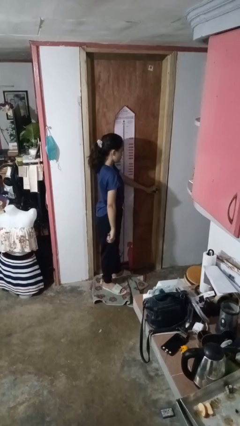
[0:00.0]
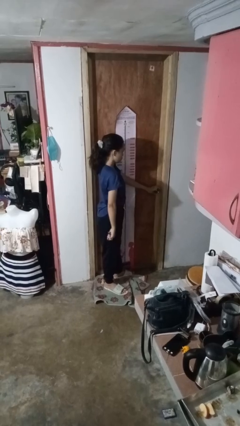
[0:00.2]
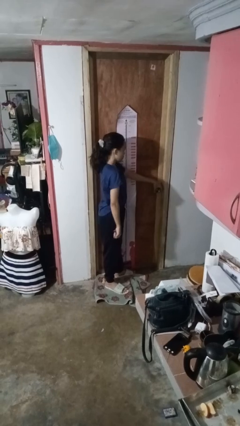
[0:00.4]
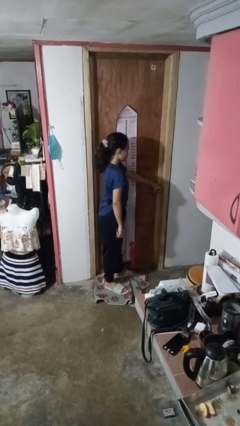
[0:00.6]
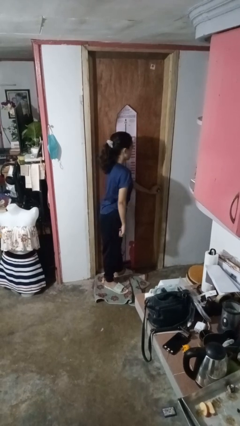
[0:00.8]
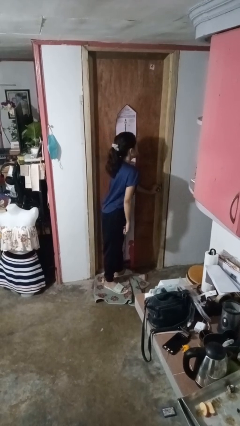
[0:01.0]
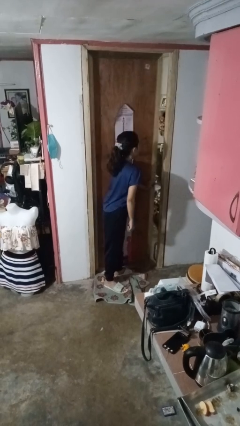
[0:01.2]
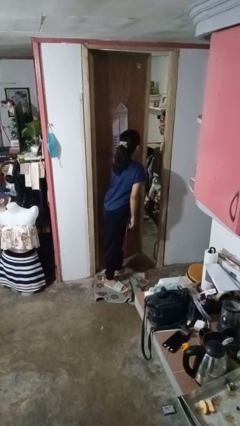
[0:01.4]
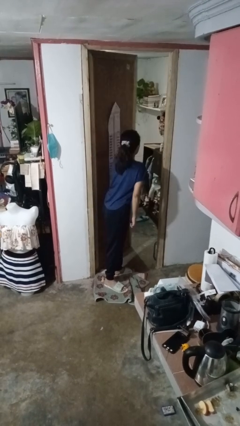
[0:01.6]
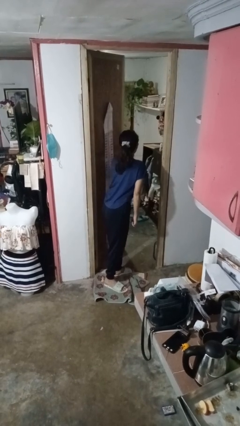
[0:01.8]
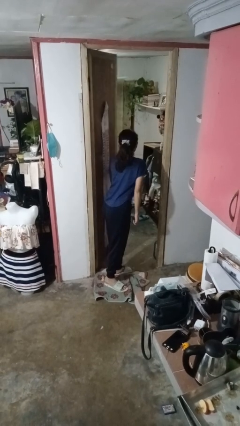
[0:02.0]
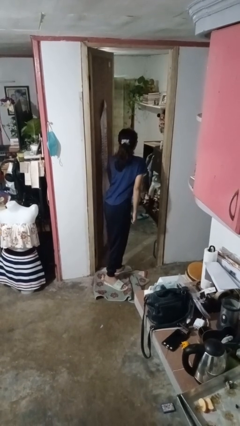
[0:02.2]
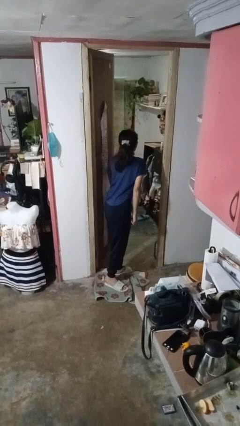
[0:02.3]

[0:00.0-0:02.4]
person opens facility door

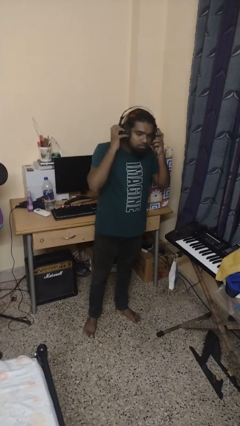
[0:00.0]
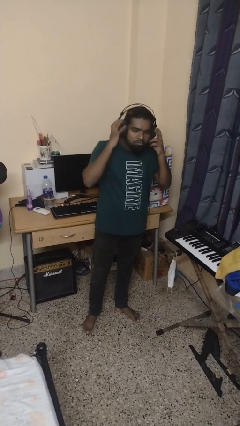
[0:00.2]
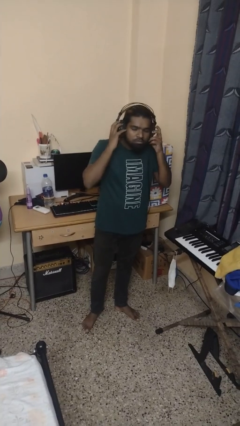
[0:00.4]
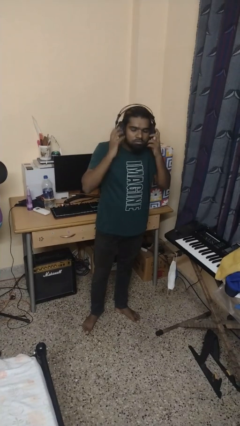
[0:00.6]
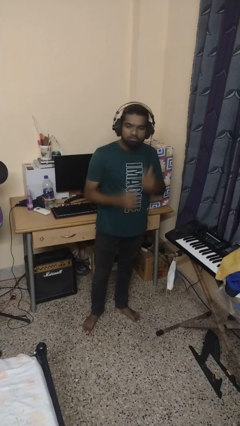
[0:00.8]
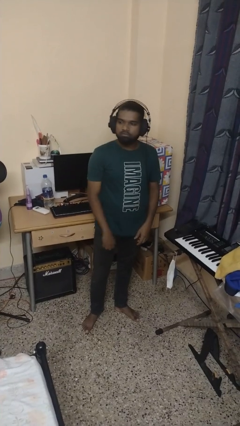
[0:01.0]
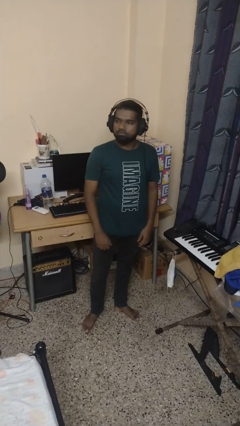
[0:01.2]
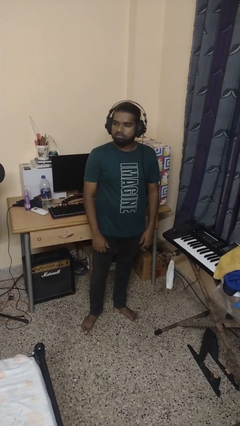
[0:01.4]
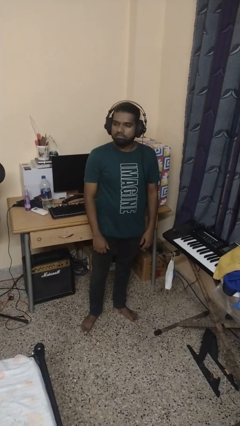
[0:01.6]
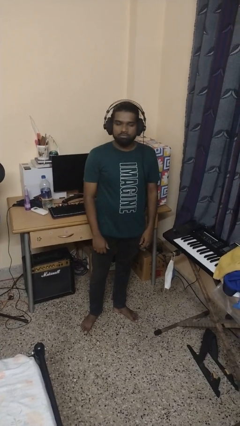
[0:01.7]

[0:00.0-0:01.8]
person puts on headphones

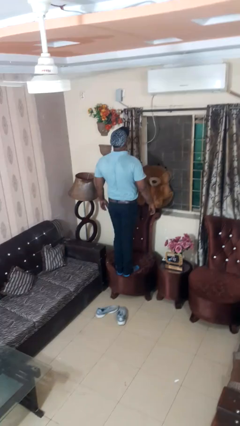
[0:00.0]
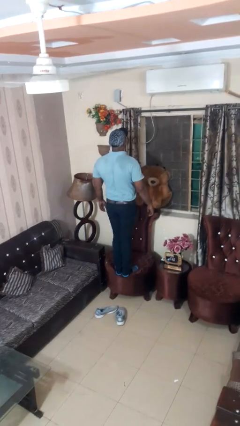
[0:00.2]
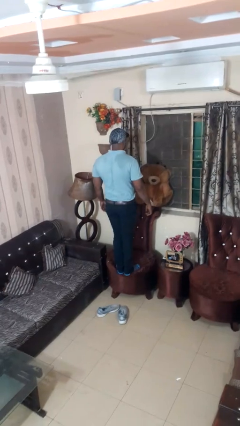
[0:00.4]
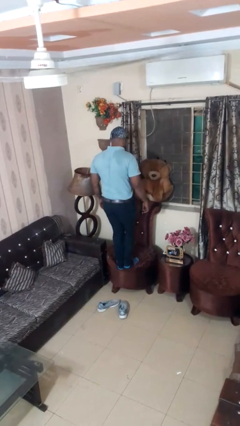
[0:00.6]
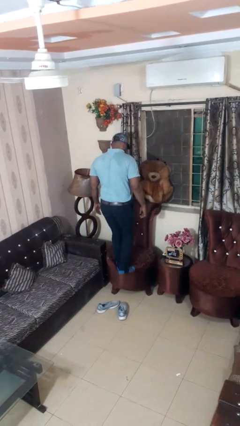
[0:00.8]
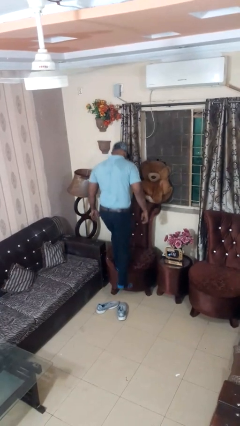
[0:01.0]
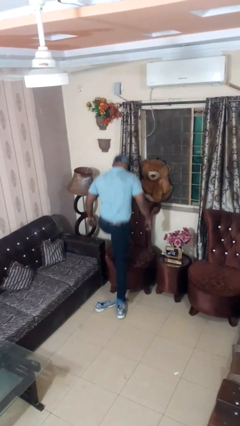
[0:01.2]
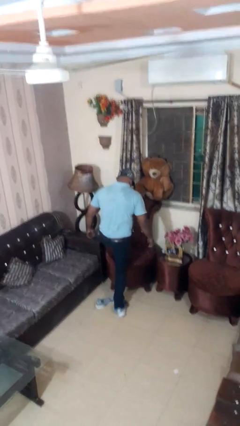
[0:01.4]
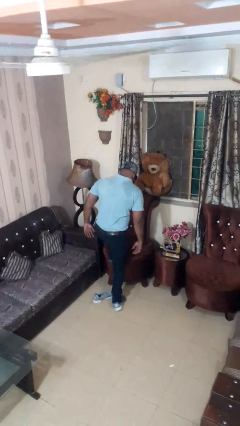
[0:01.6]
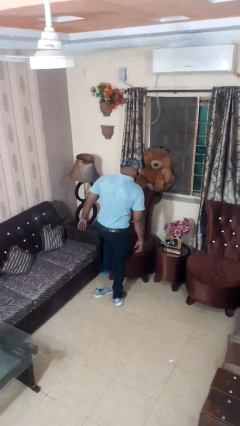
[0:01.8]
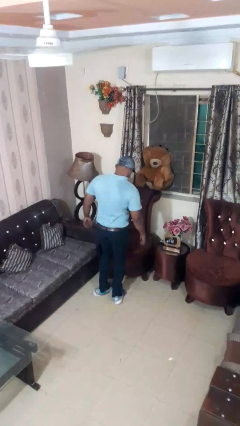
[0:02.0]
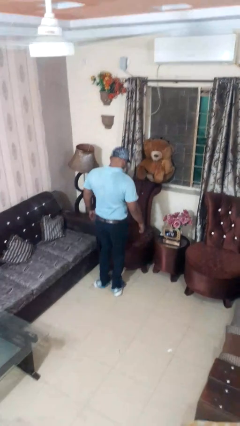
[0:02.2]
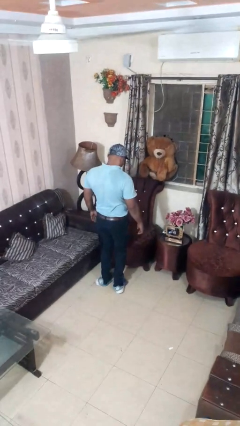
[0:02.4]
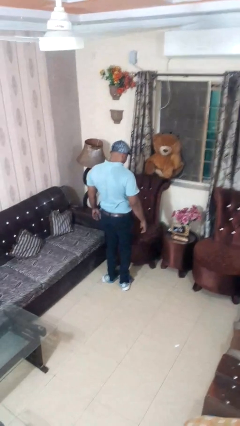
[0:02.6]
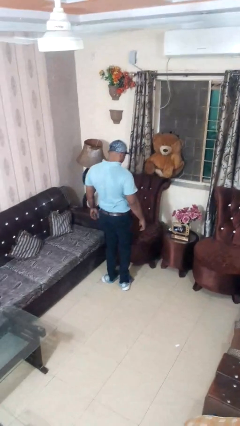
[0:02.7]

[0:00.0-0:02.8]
person climbs off chair

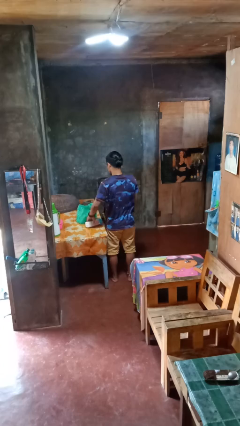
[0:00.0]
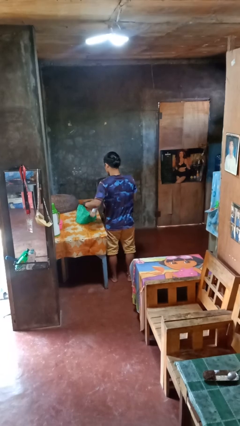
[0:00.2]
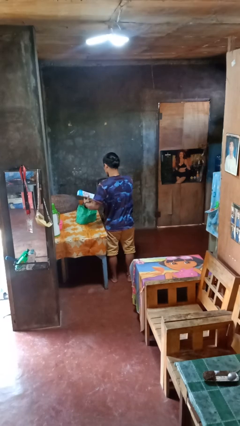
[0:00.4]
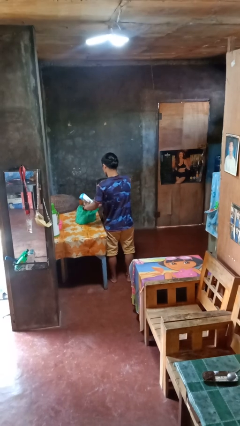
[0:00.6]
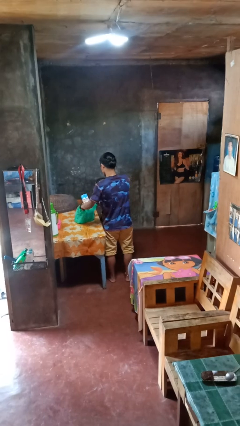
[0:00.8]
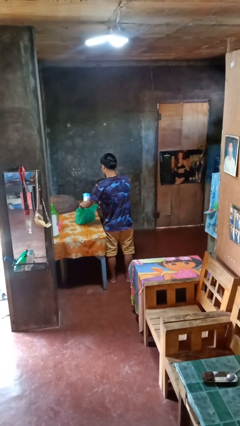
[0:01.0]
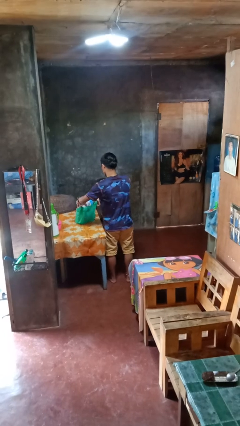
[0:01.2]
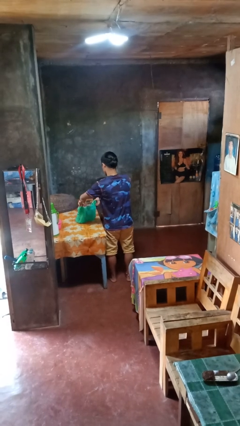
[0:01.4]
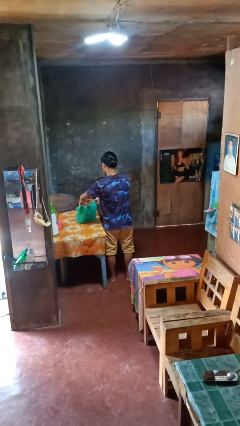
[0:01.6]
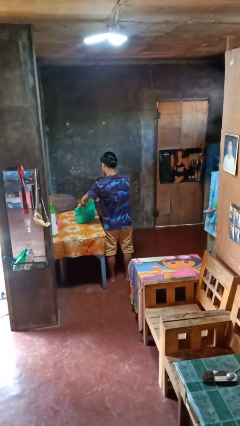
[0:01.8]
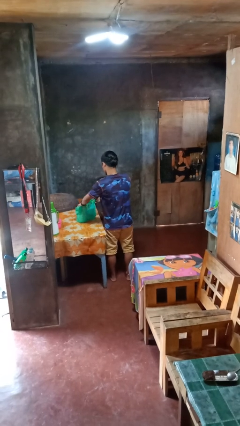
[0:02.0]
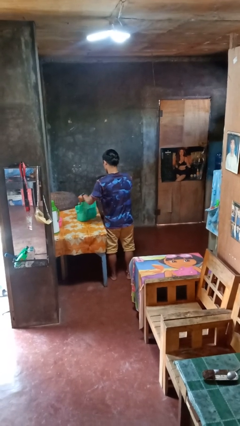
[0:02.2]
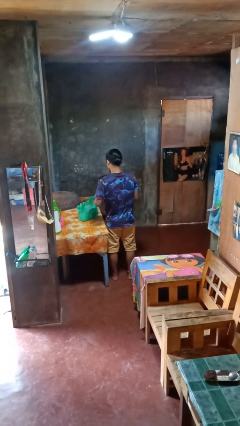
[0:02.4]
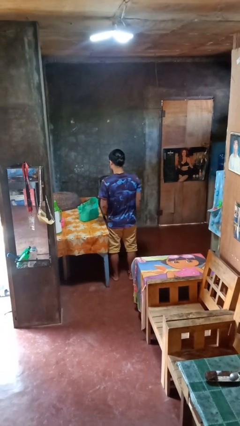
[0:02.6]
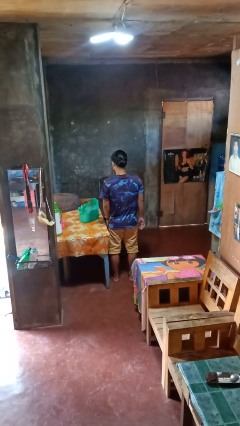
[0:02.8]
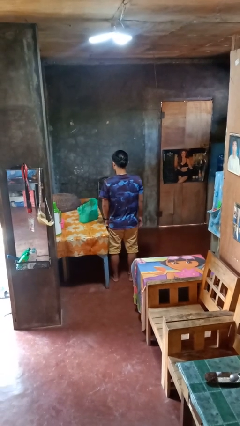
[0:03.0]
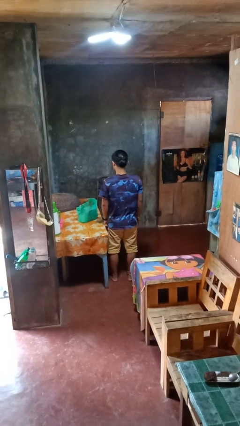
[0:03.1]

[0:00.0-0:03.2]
person puts object into bag

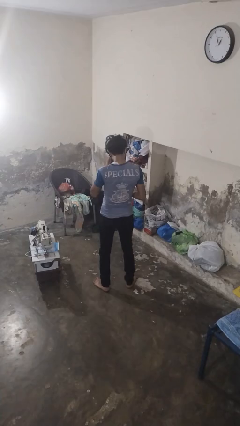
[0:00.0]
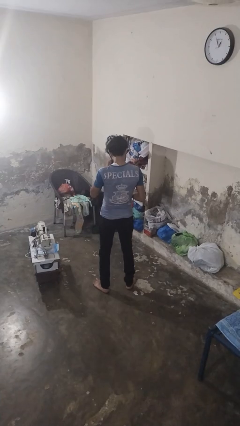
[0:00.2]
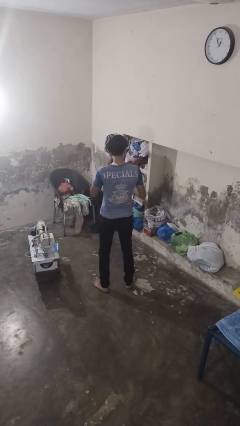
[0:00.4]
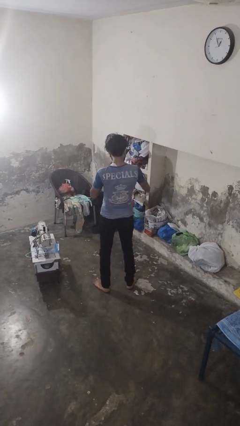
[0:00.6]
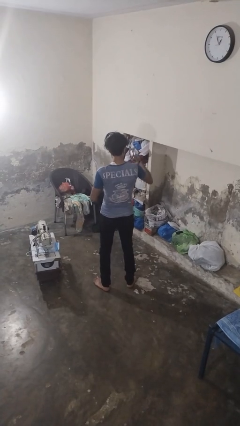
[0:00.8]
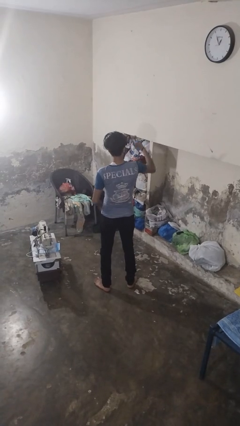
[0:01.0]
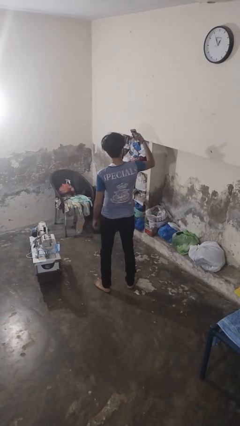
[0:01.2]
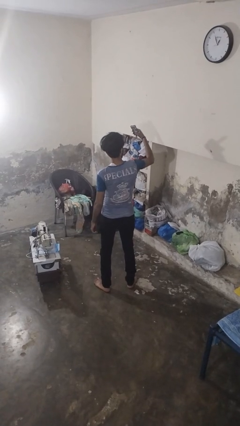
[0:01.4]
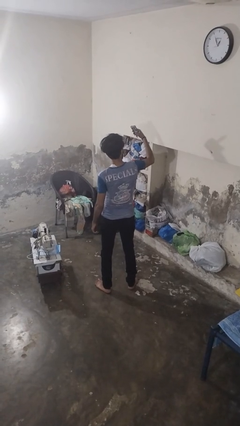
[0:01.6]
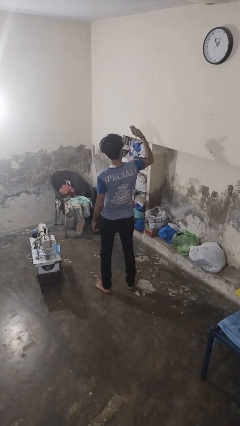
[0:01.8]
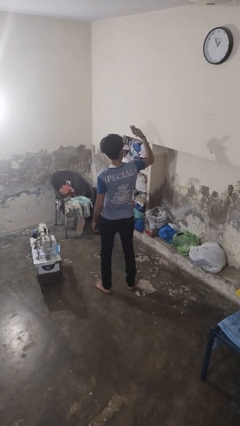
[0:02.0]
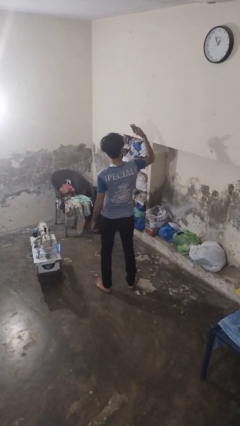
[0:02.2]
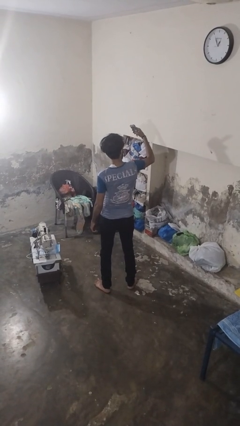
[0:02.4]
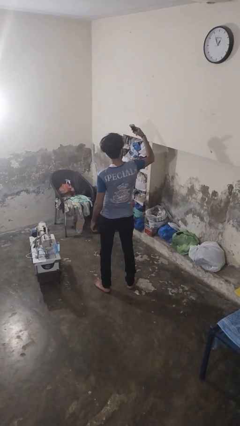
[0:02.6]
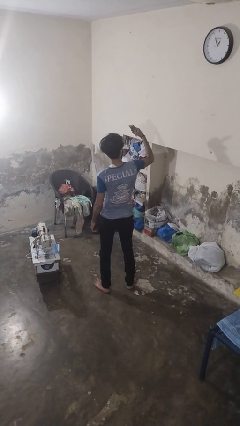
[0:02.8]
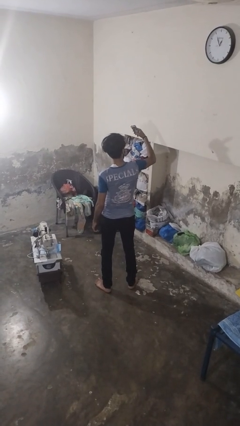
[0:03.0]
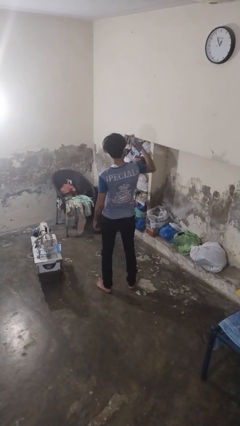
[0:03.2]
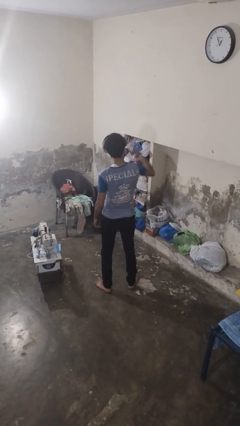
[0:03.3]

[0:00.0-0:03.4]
person takes selfie

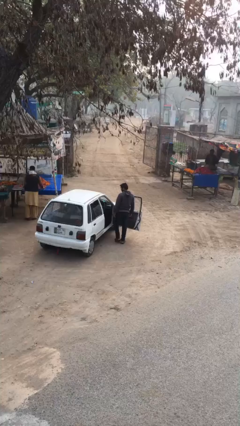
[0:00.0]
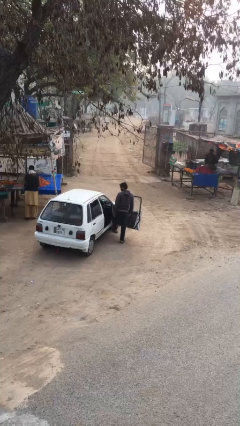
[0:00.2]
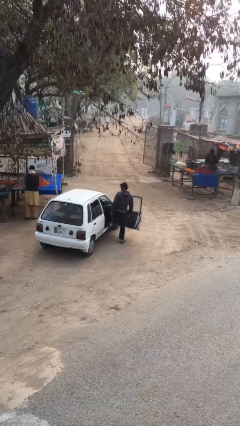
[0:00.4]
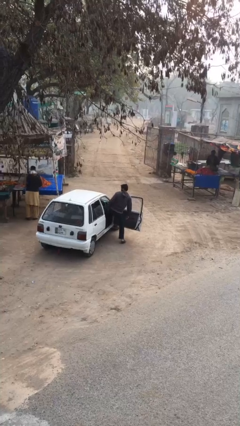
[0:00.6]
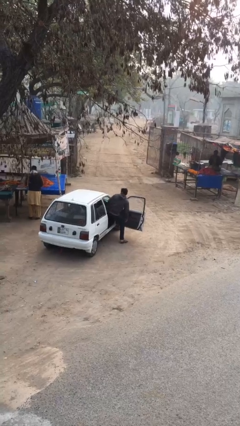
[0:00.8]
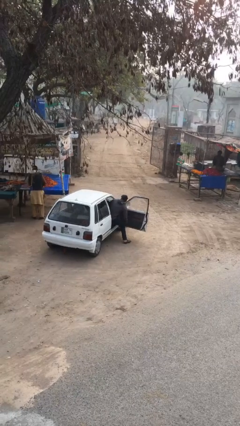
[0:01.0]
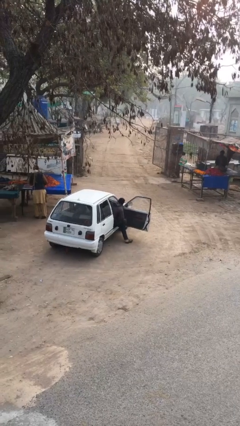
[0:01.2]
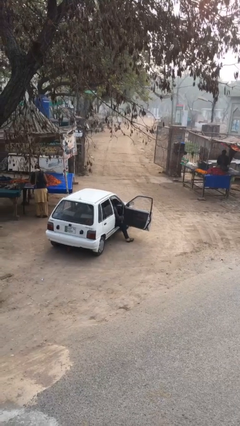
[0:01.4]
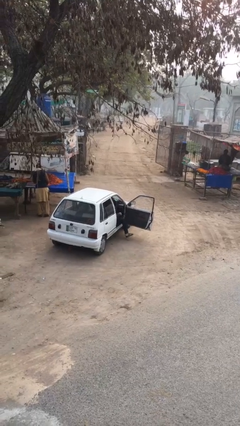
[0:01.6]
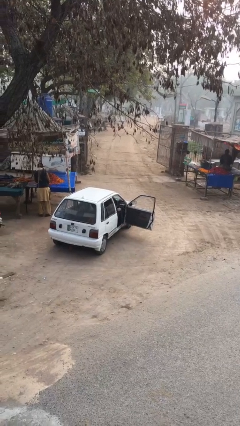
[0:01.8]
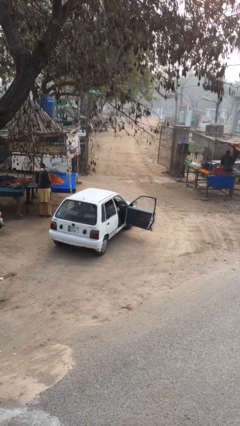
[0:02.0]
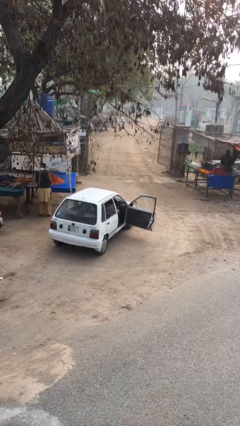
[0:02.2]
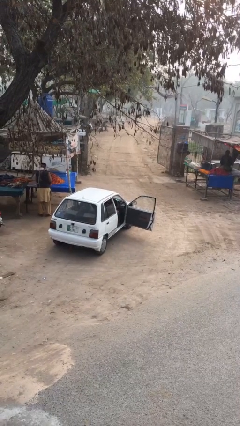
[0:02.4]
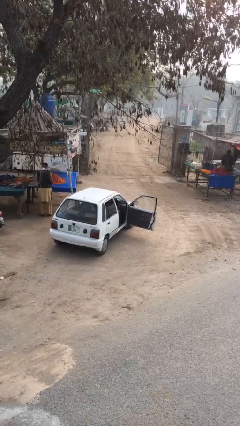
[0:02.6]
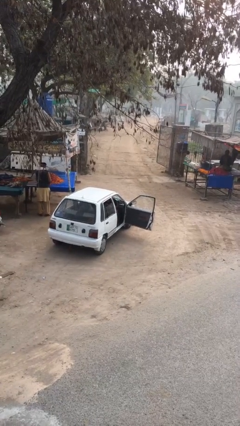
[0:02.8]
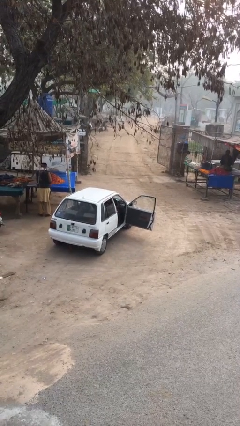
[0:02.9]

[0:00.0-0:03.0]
person enters car

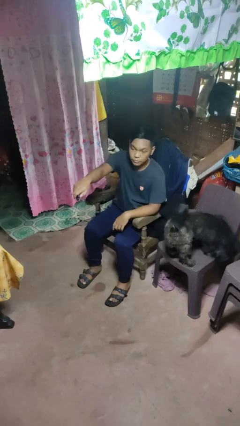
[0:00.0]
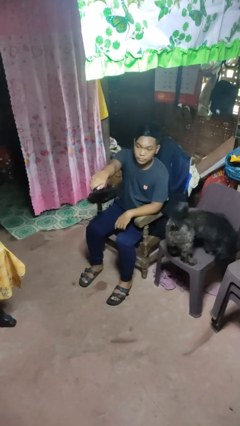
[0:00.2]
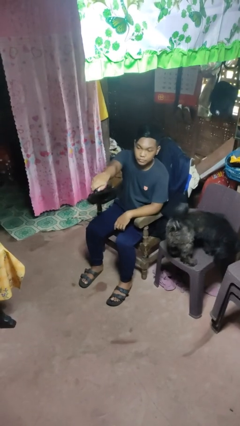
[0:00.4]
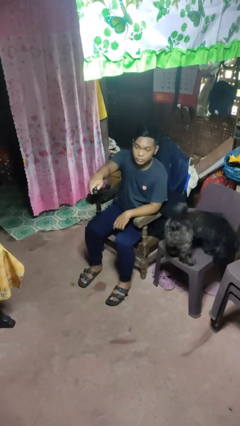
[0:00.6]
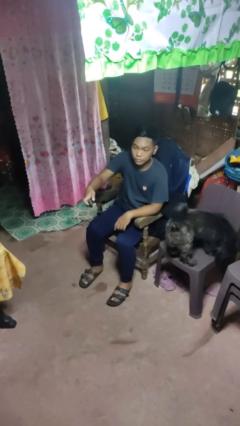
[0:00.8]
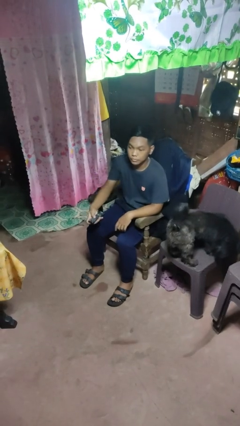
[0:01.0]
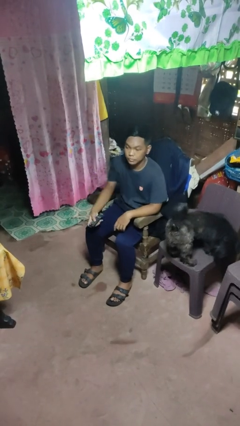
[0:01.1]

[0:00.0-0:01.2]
person uses television remote
